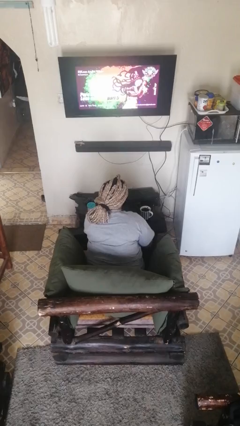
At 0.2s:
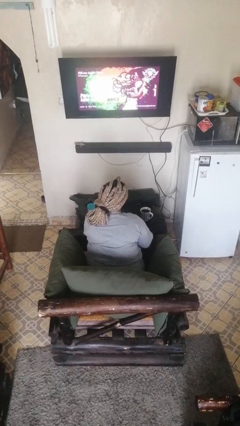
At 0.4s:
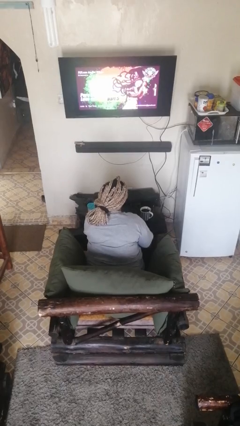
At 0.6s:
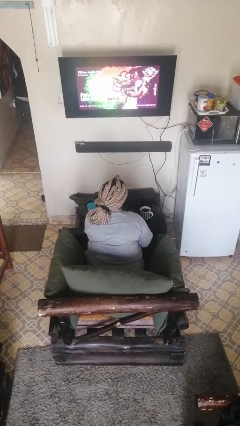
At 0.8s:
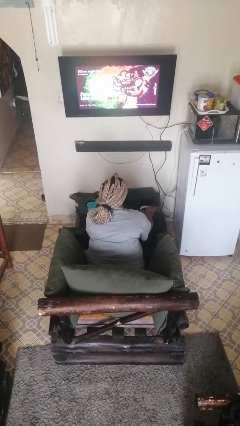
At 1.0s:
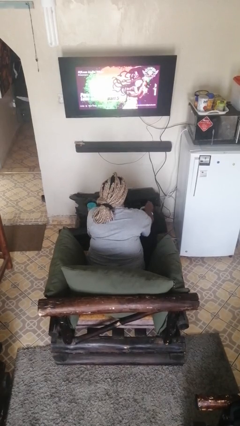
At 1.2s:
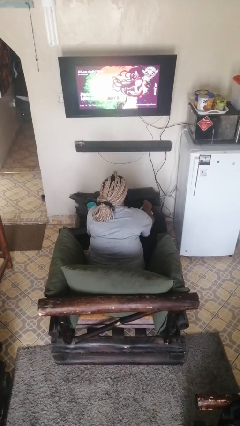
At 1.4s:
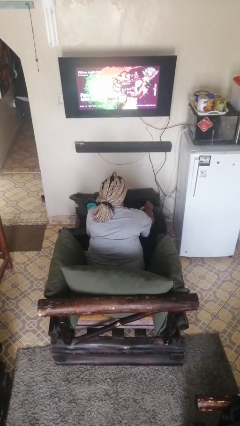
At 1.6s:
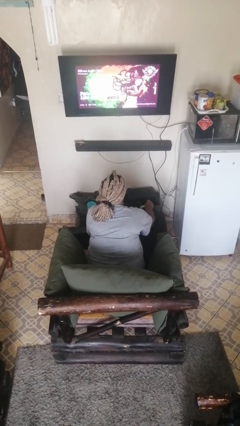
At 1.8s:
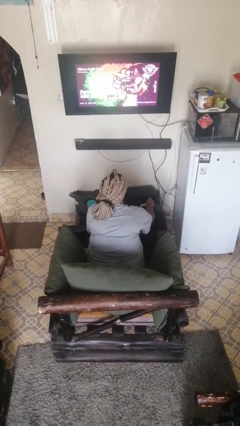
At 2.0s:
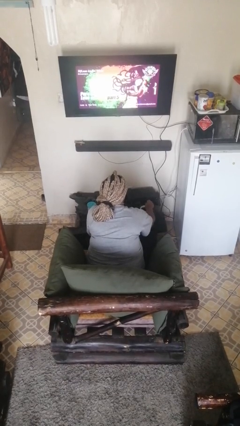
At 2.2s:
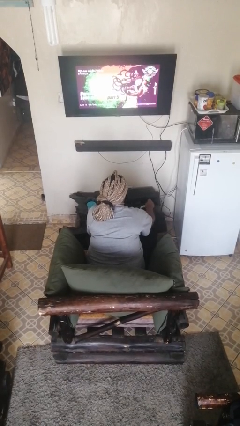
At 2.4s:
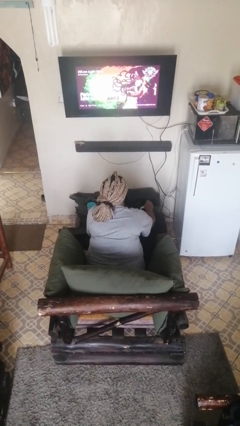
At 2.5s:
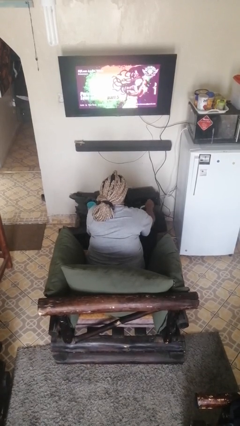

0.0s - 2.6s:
person stirs mug

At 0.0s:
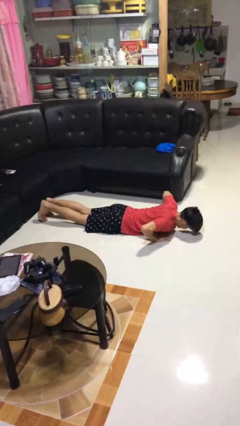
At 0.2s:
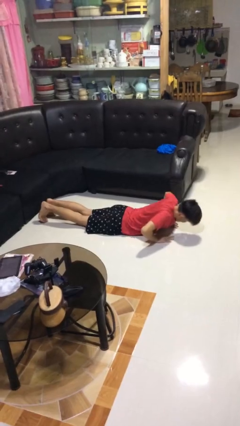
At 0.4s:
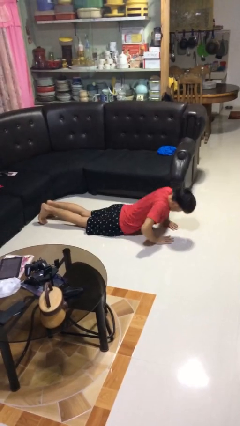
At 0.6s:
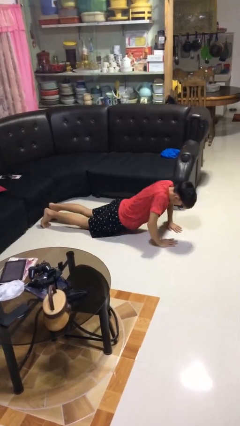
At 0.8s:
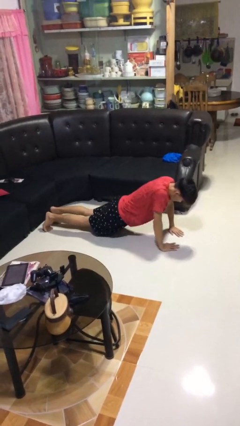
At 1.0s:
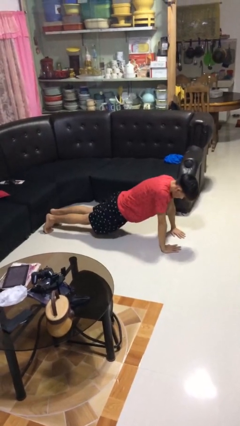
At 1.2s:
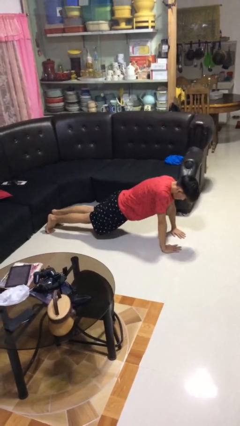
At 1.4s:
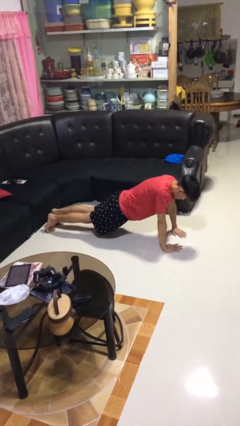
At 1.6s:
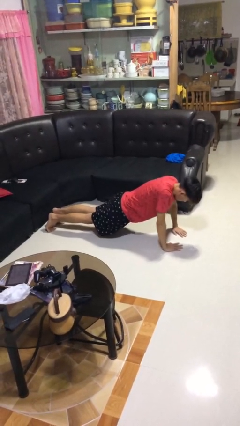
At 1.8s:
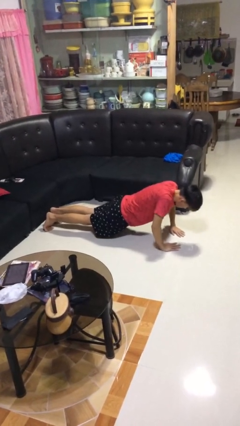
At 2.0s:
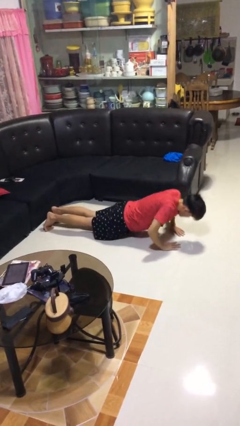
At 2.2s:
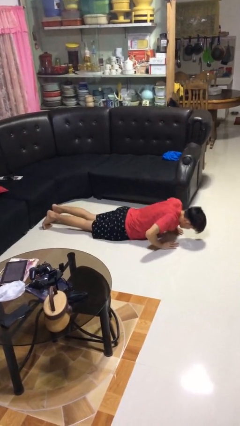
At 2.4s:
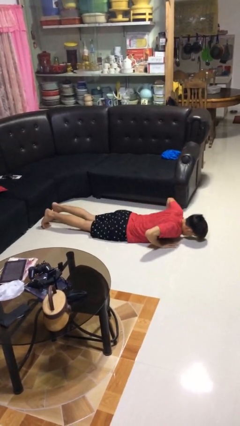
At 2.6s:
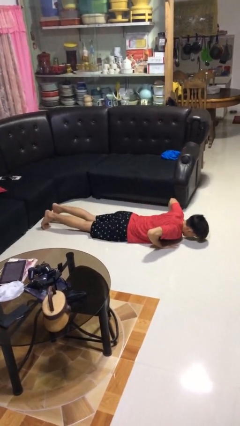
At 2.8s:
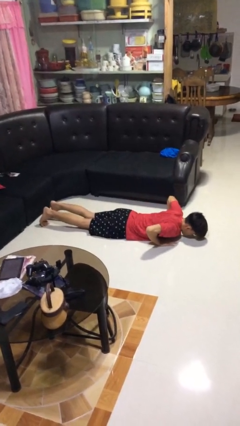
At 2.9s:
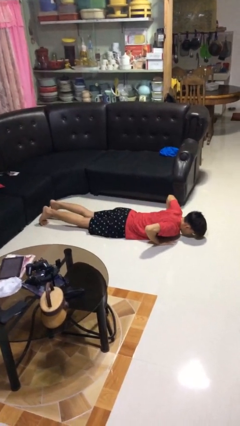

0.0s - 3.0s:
person exercises with pushup

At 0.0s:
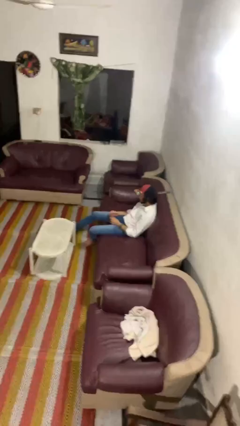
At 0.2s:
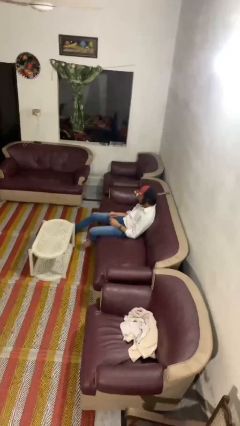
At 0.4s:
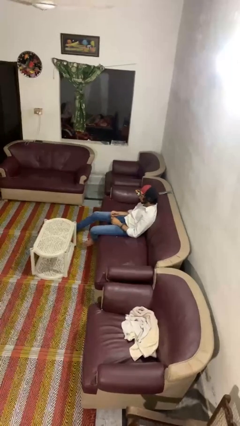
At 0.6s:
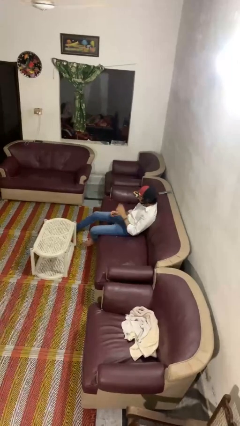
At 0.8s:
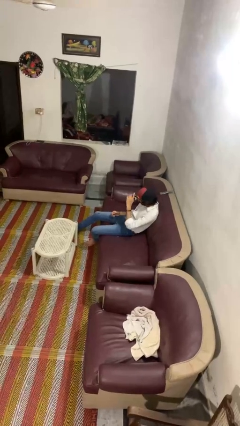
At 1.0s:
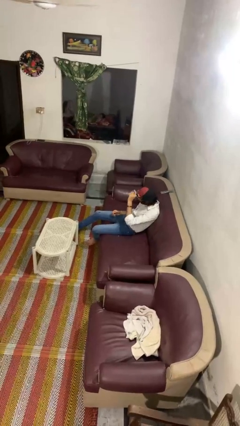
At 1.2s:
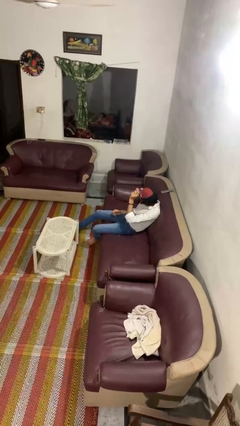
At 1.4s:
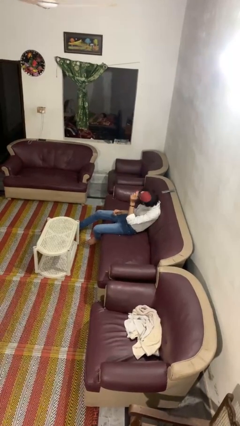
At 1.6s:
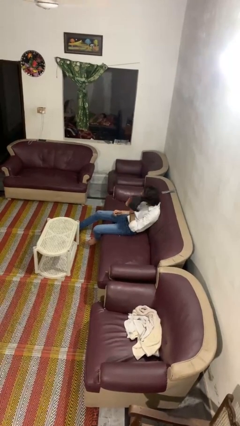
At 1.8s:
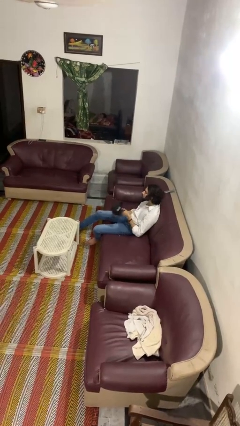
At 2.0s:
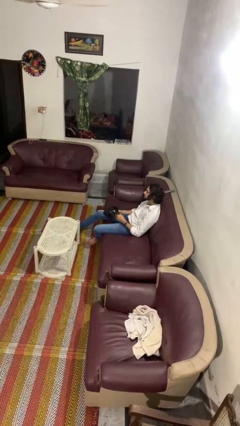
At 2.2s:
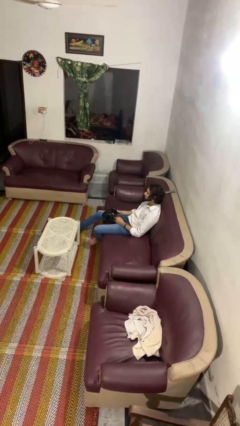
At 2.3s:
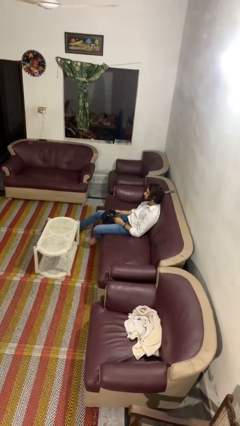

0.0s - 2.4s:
person takes off hat

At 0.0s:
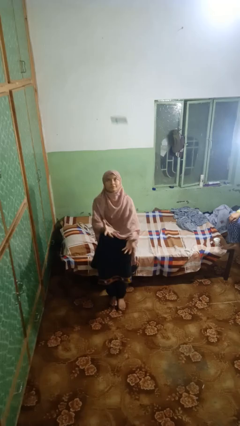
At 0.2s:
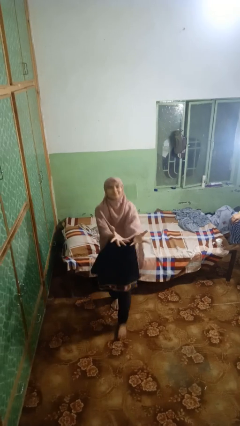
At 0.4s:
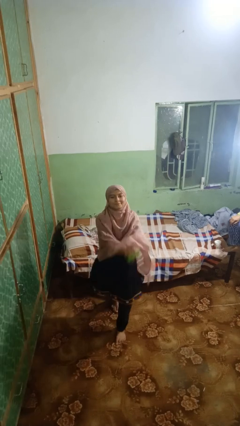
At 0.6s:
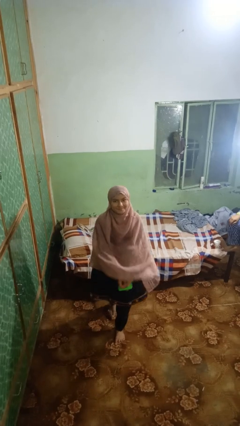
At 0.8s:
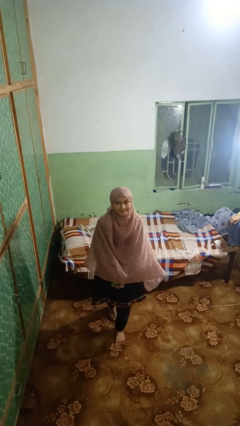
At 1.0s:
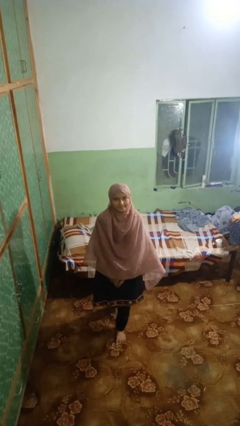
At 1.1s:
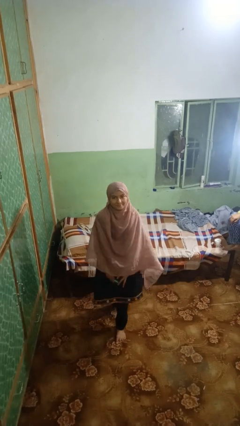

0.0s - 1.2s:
person picks up object from floor

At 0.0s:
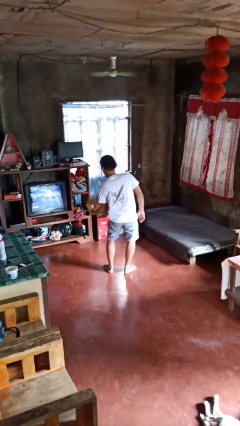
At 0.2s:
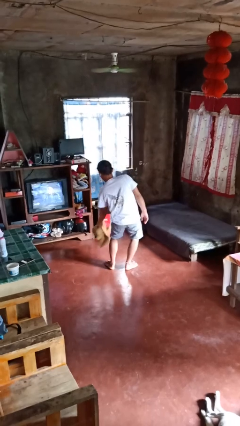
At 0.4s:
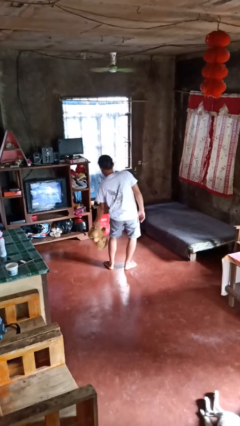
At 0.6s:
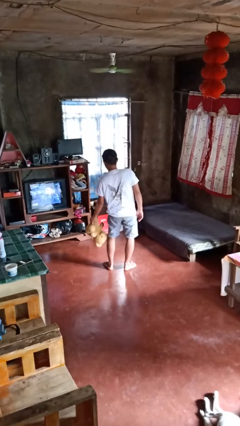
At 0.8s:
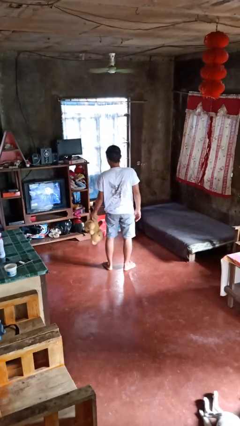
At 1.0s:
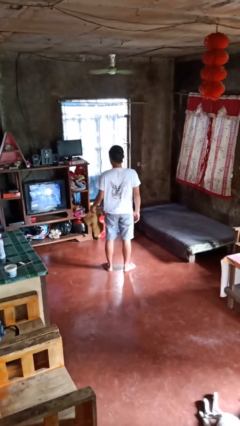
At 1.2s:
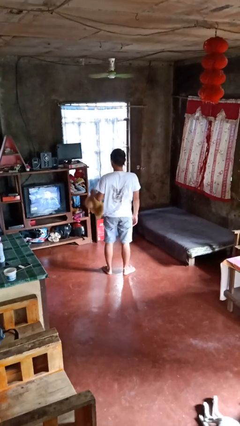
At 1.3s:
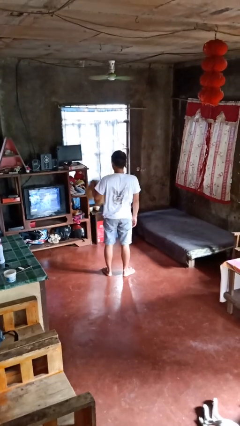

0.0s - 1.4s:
person catches dropped object

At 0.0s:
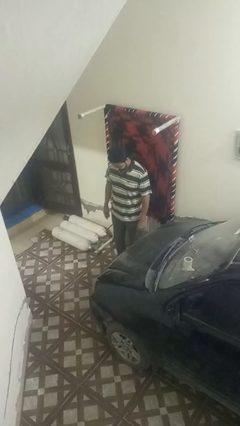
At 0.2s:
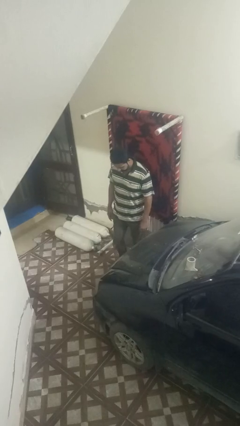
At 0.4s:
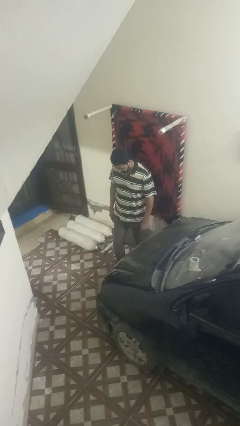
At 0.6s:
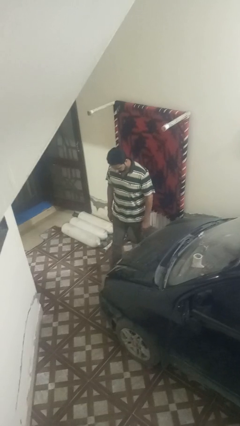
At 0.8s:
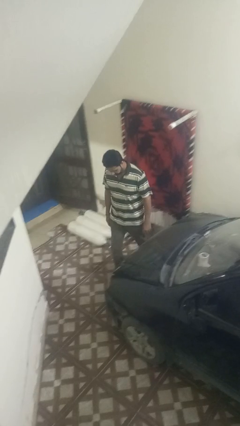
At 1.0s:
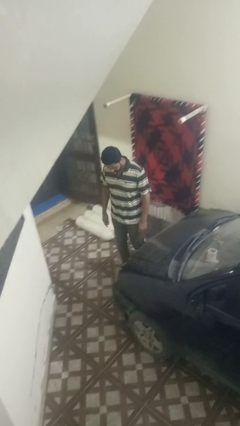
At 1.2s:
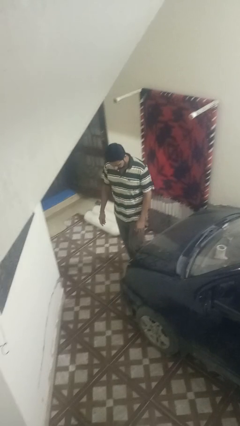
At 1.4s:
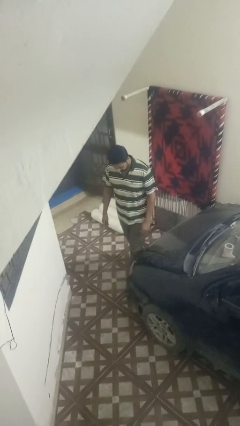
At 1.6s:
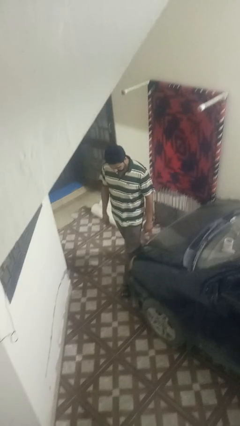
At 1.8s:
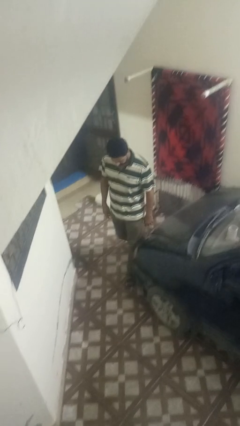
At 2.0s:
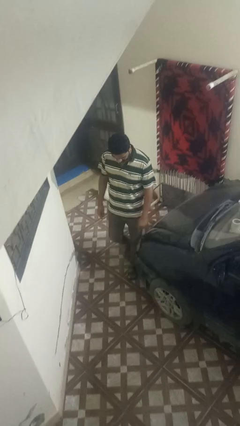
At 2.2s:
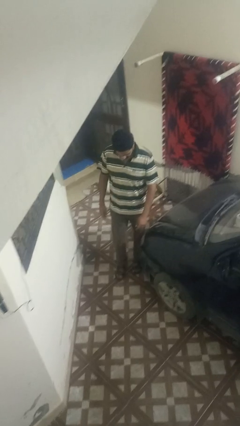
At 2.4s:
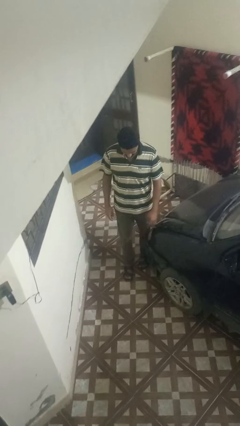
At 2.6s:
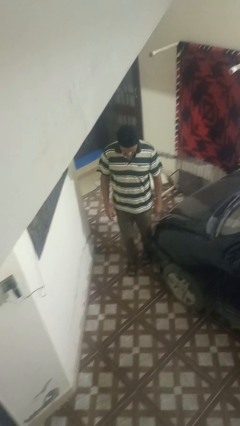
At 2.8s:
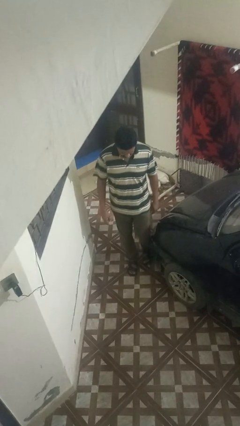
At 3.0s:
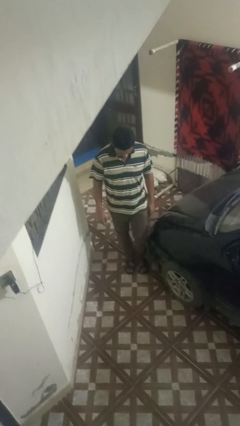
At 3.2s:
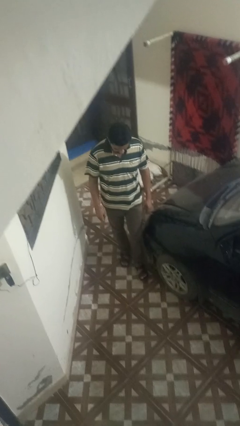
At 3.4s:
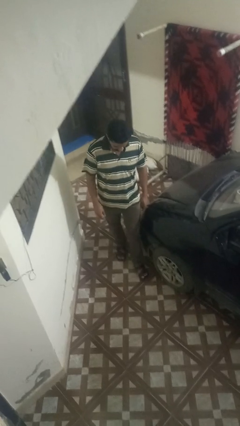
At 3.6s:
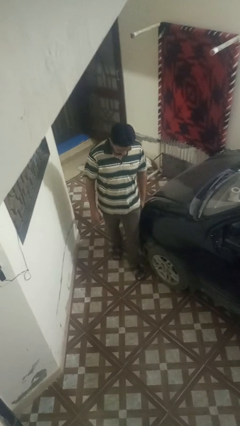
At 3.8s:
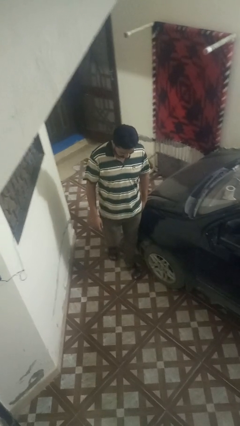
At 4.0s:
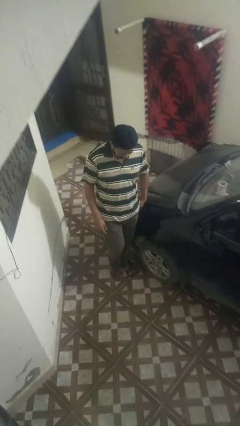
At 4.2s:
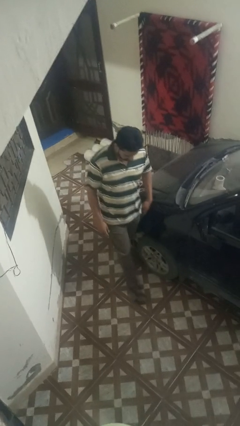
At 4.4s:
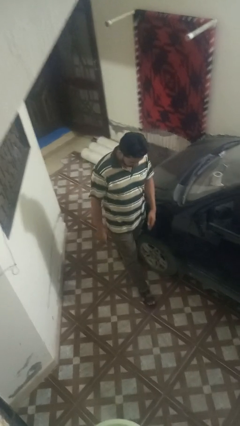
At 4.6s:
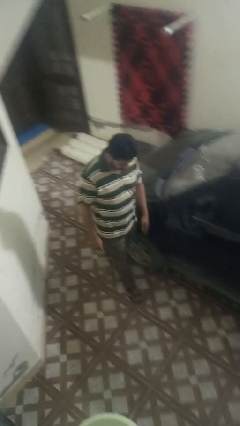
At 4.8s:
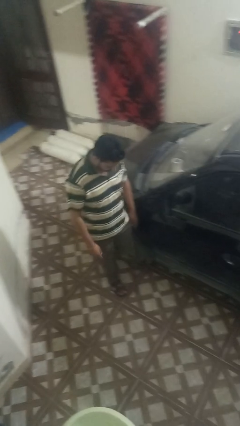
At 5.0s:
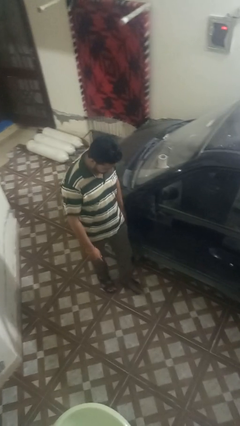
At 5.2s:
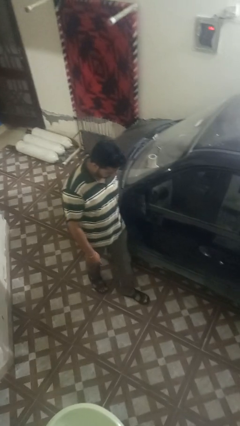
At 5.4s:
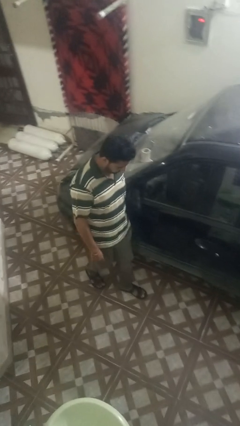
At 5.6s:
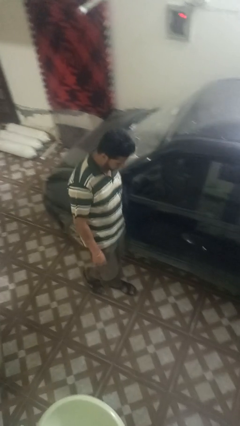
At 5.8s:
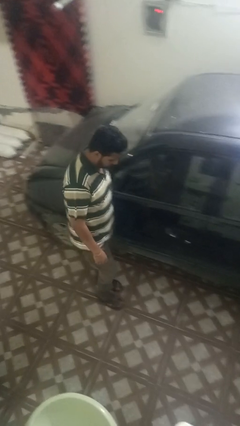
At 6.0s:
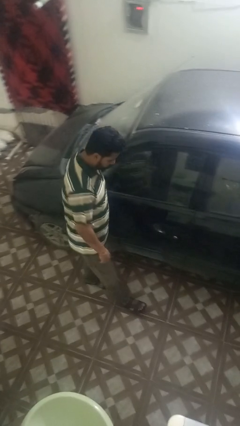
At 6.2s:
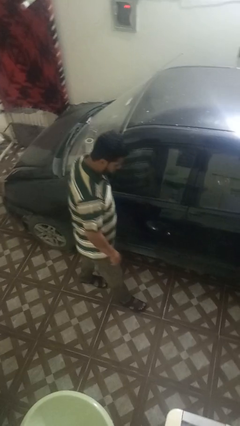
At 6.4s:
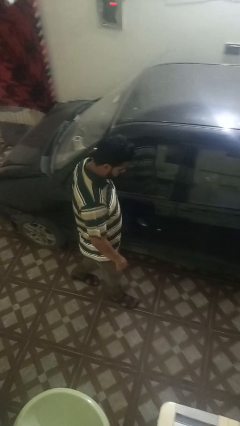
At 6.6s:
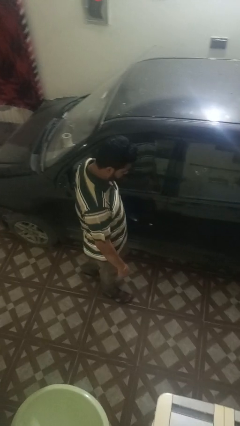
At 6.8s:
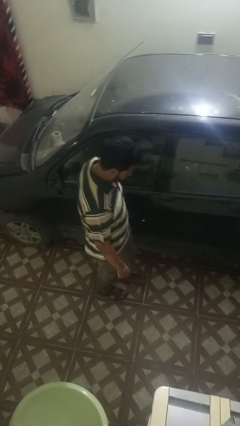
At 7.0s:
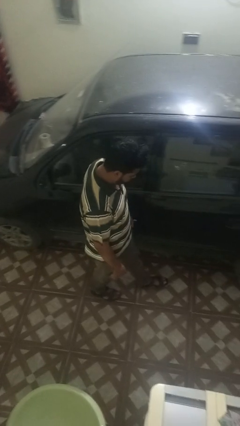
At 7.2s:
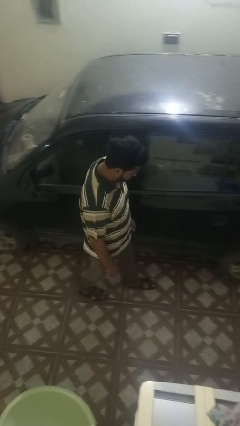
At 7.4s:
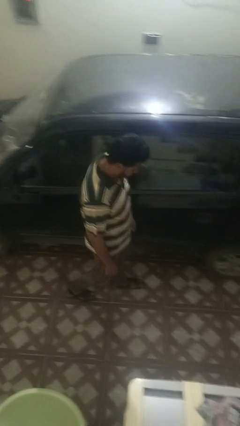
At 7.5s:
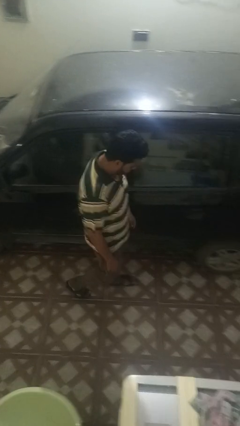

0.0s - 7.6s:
person walks around car
